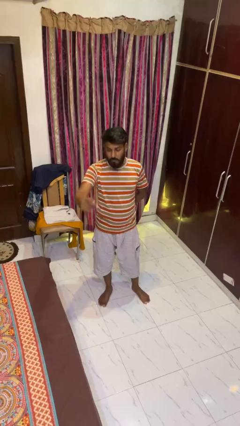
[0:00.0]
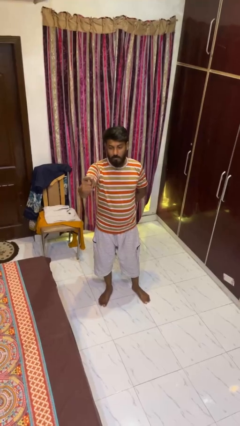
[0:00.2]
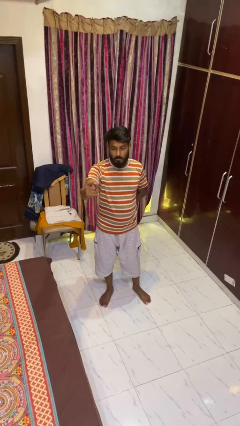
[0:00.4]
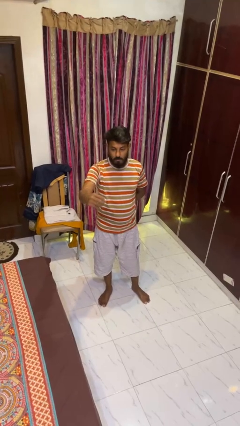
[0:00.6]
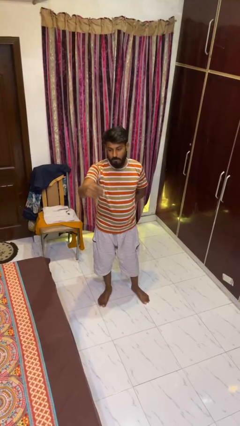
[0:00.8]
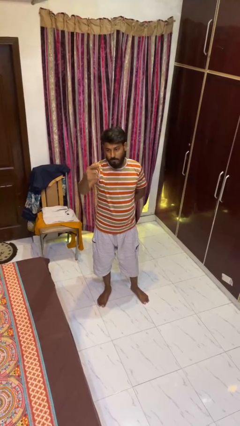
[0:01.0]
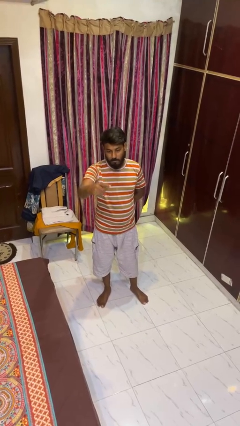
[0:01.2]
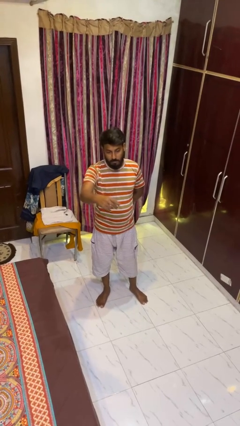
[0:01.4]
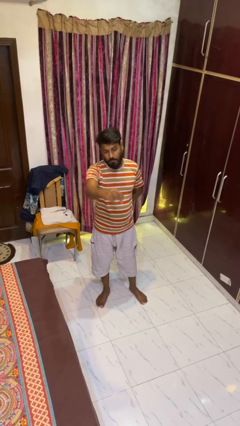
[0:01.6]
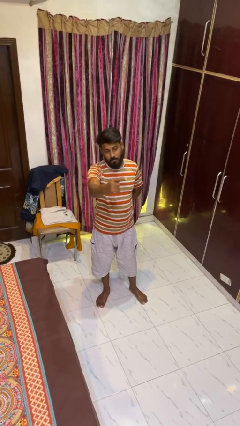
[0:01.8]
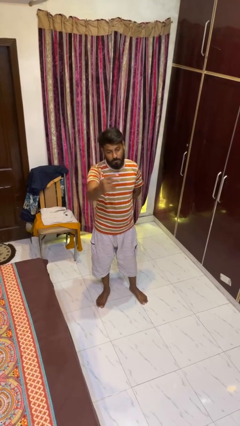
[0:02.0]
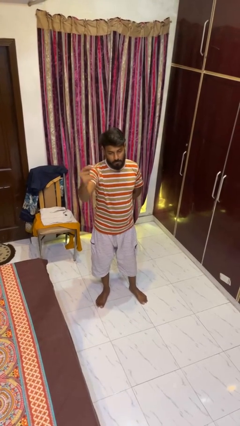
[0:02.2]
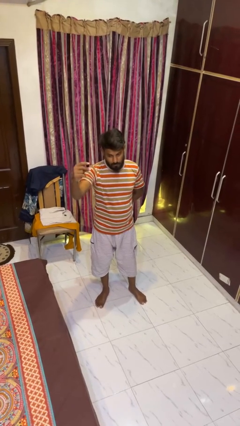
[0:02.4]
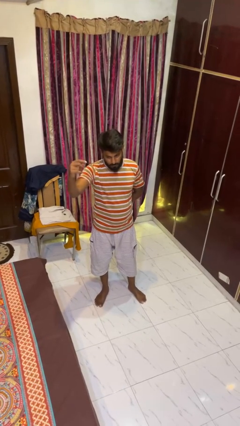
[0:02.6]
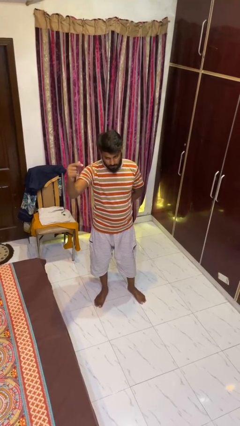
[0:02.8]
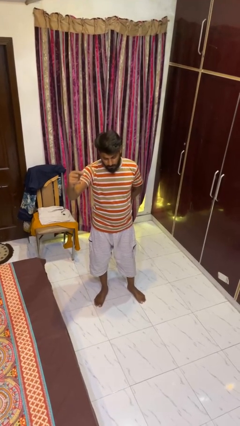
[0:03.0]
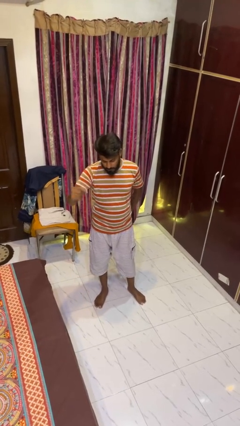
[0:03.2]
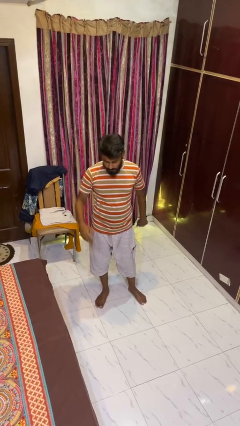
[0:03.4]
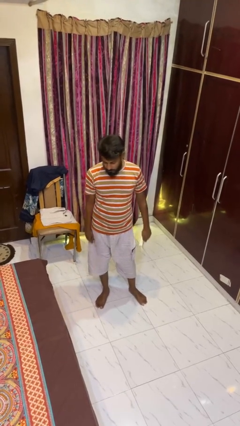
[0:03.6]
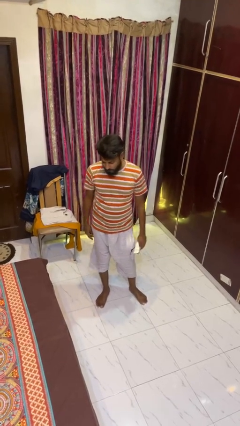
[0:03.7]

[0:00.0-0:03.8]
person snaps fingers

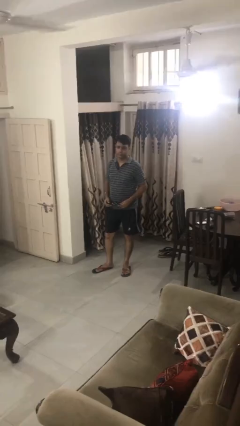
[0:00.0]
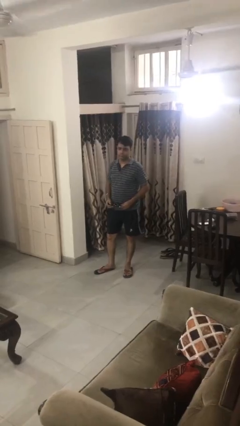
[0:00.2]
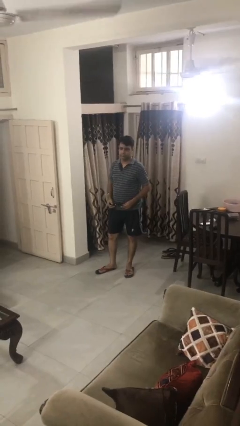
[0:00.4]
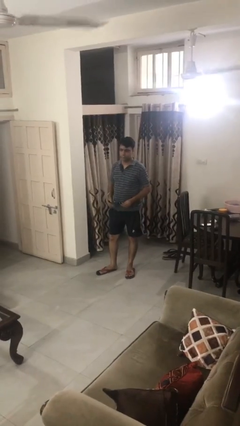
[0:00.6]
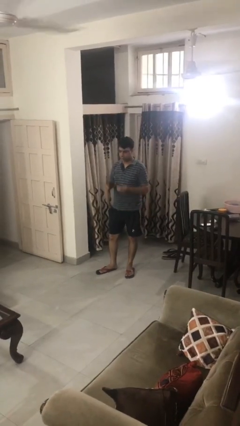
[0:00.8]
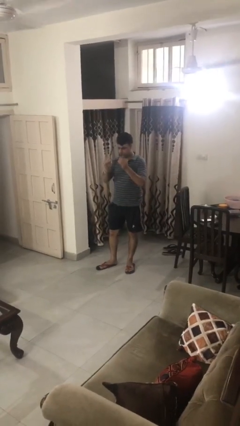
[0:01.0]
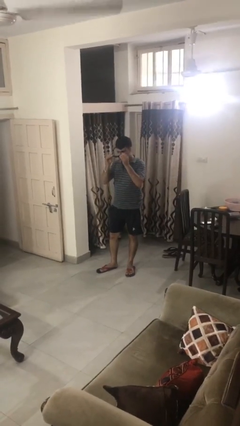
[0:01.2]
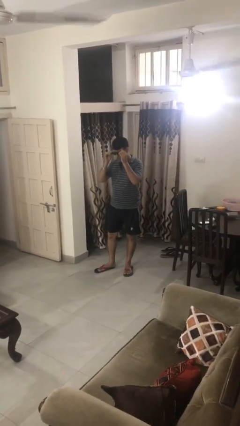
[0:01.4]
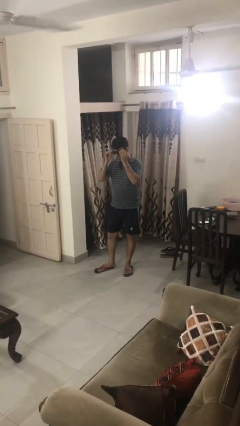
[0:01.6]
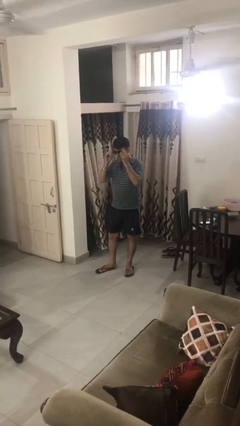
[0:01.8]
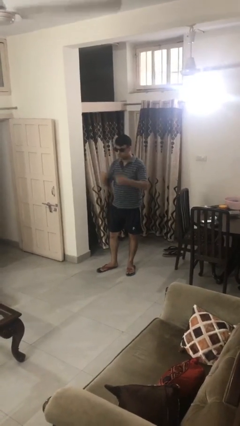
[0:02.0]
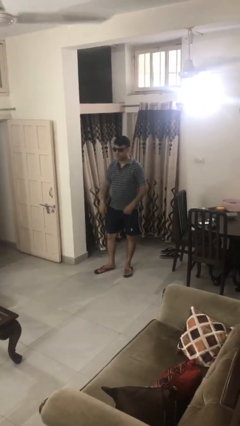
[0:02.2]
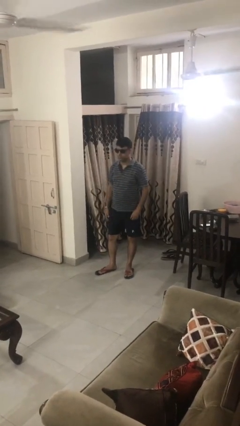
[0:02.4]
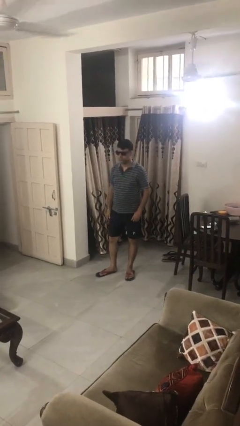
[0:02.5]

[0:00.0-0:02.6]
person puts on sunglasses

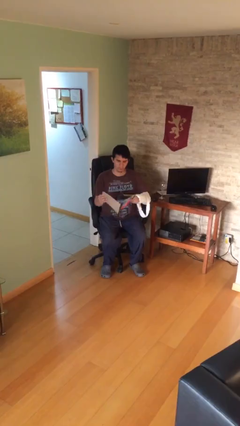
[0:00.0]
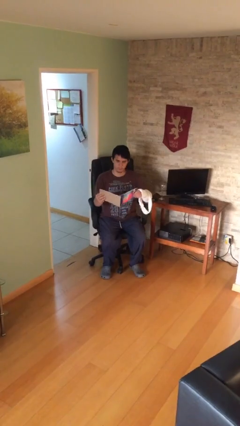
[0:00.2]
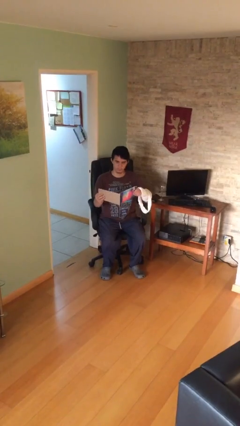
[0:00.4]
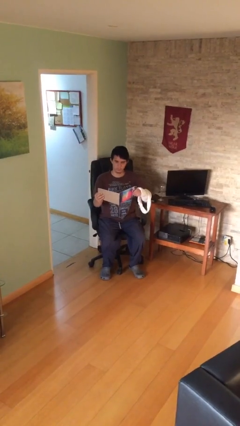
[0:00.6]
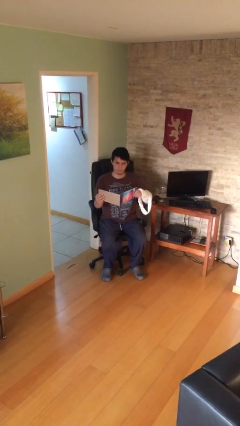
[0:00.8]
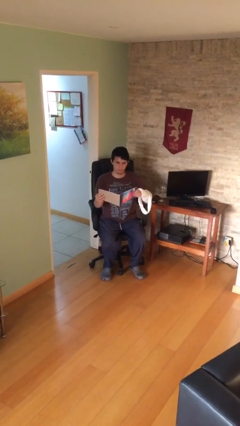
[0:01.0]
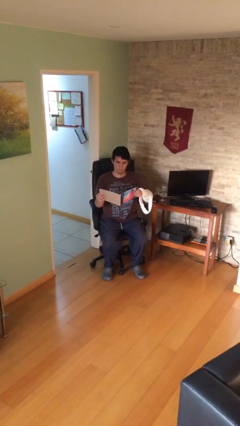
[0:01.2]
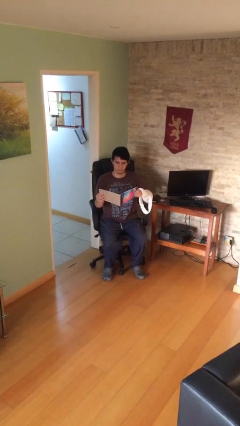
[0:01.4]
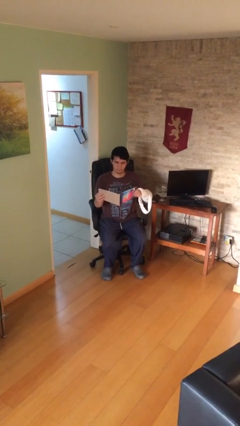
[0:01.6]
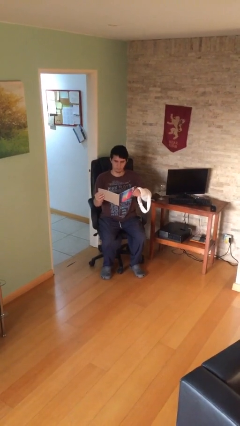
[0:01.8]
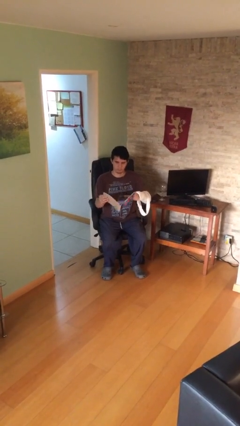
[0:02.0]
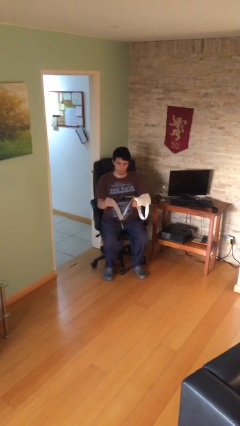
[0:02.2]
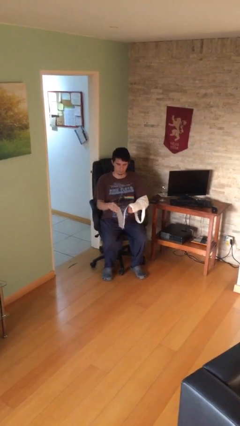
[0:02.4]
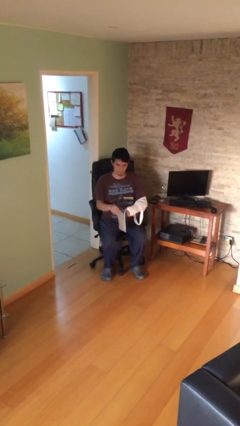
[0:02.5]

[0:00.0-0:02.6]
person reads document

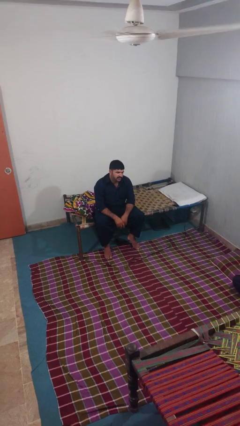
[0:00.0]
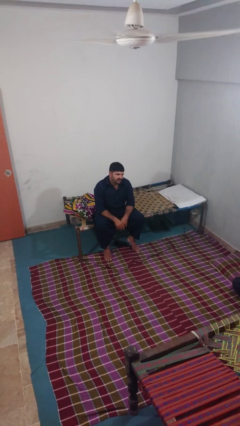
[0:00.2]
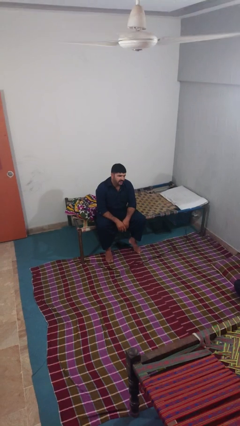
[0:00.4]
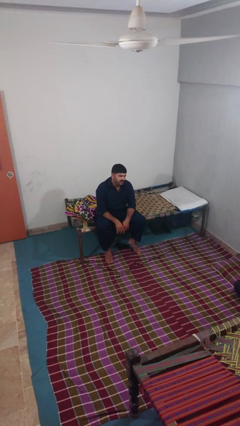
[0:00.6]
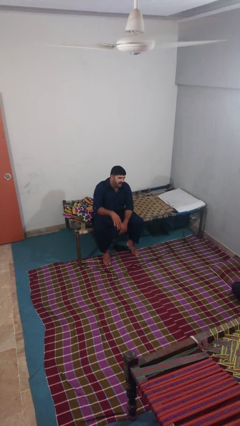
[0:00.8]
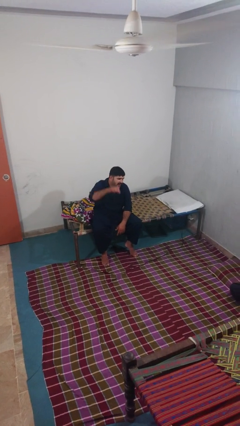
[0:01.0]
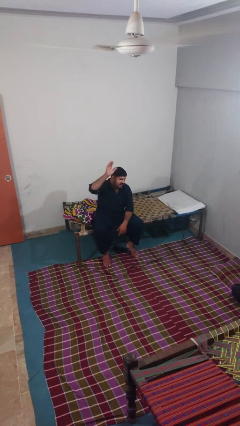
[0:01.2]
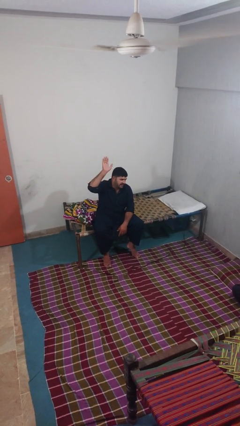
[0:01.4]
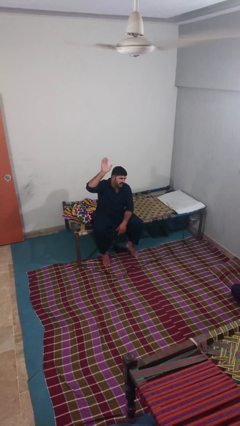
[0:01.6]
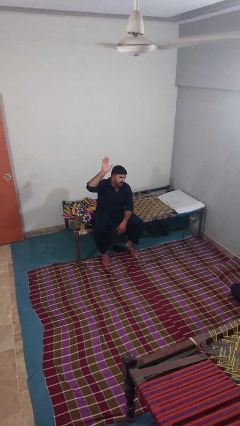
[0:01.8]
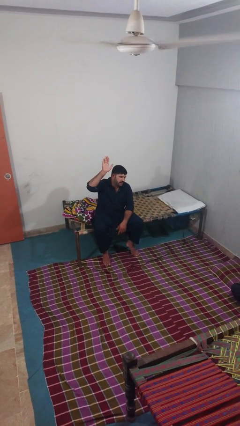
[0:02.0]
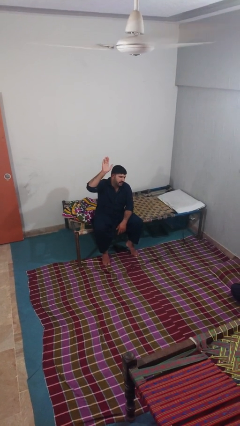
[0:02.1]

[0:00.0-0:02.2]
person gestures swipe up

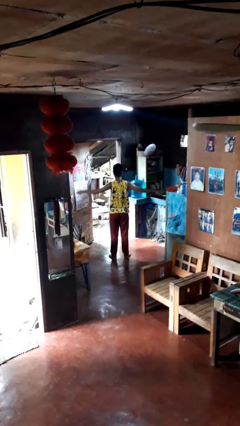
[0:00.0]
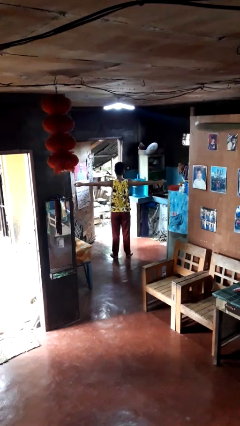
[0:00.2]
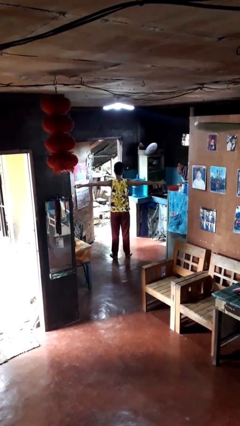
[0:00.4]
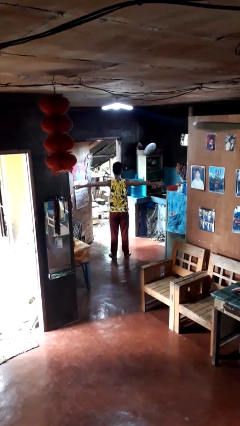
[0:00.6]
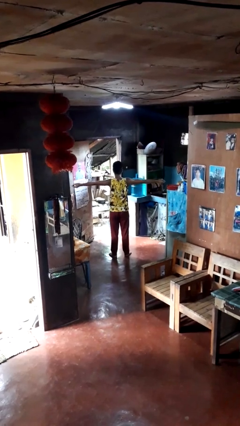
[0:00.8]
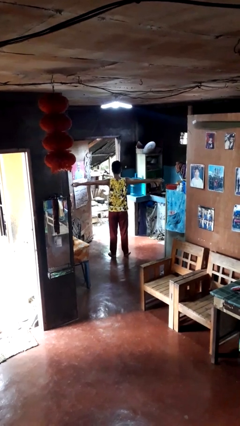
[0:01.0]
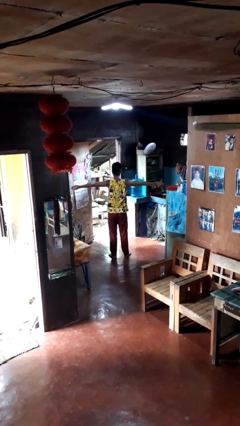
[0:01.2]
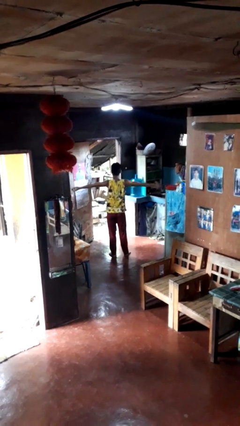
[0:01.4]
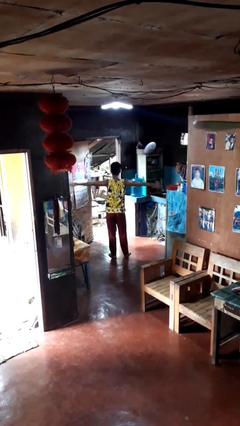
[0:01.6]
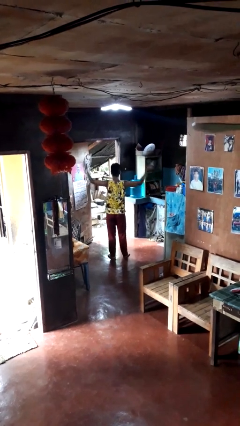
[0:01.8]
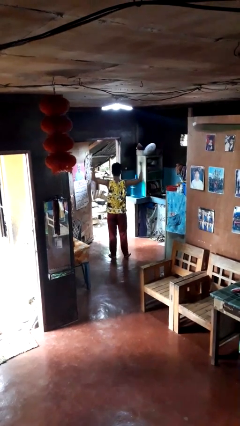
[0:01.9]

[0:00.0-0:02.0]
person stretches arms to side

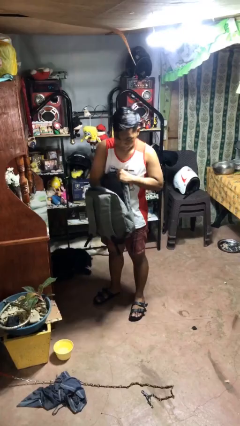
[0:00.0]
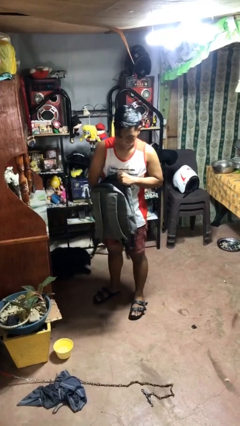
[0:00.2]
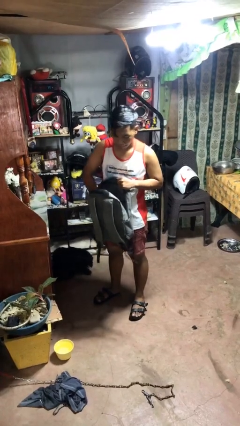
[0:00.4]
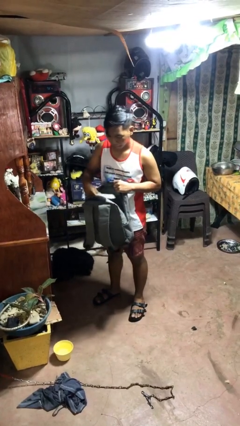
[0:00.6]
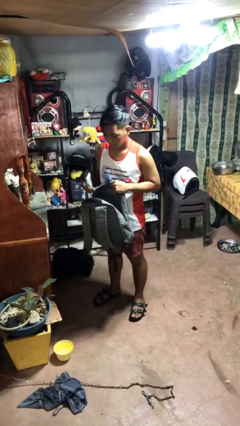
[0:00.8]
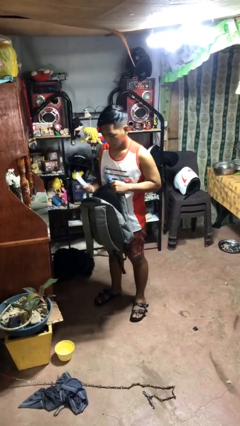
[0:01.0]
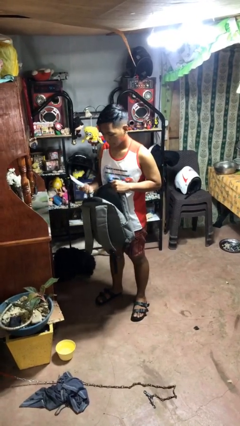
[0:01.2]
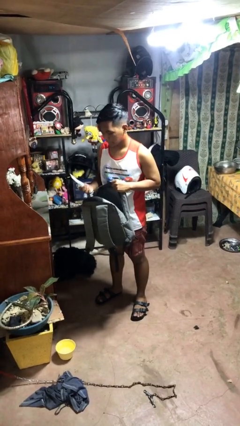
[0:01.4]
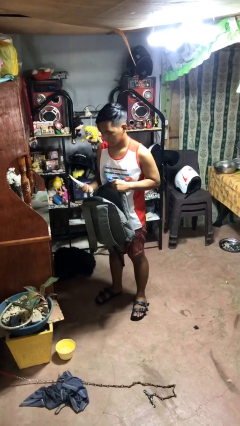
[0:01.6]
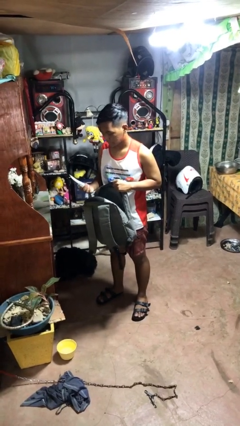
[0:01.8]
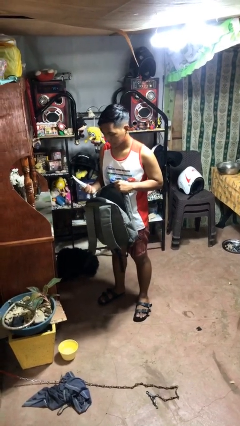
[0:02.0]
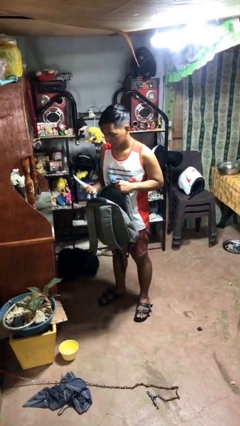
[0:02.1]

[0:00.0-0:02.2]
person takes object from bag

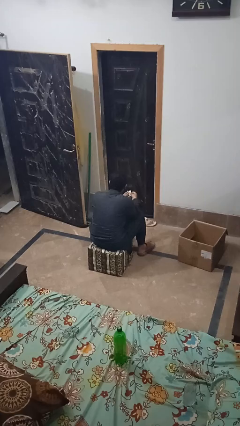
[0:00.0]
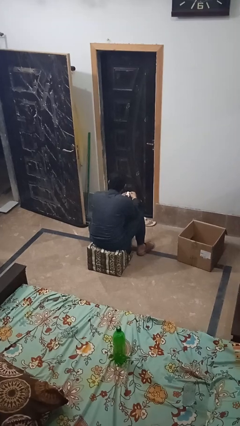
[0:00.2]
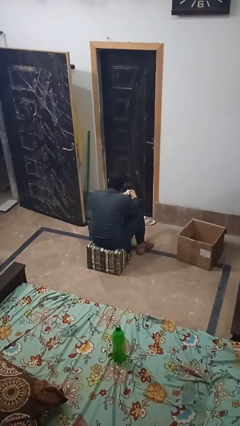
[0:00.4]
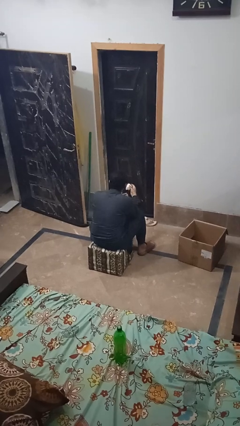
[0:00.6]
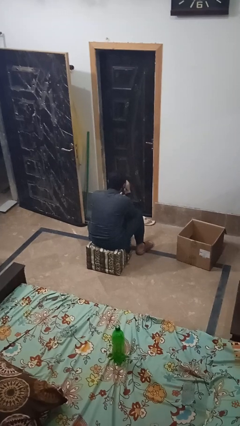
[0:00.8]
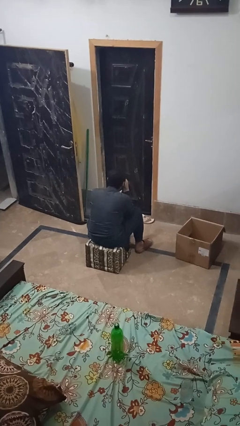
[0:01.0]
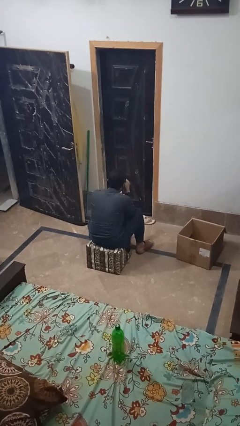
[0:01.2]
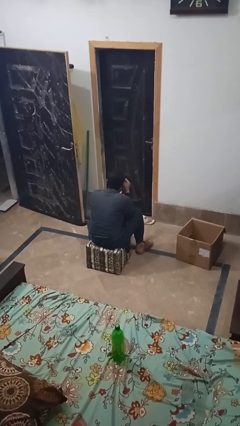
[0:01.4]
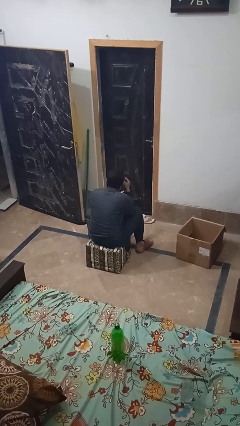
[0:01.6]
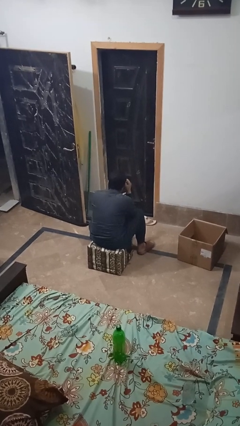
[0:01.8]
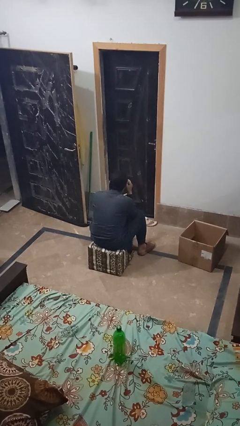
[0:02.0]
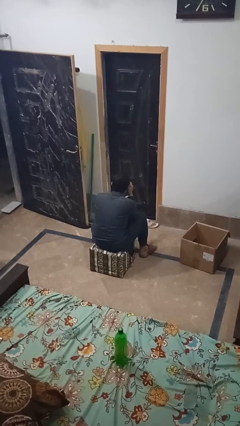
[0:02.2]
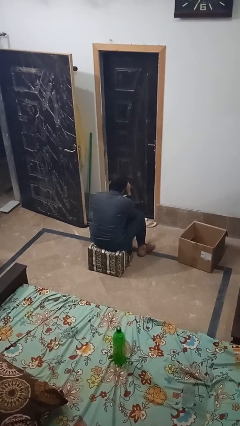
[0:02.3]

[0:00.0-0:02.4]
person blows nose
